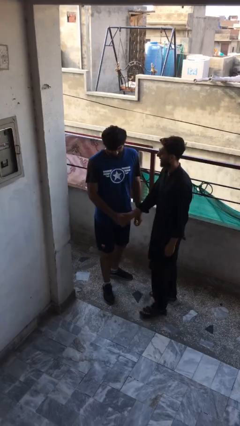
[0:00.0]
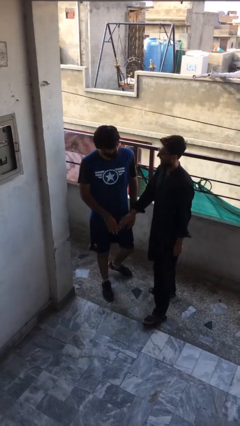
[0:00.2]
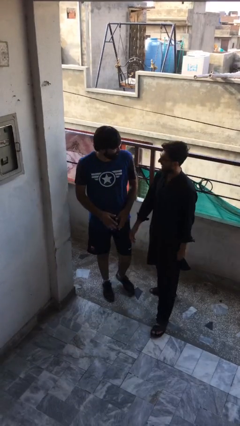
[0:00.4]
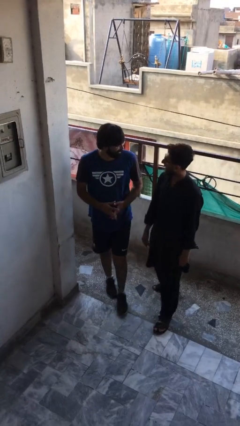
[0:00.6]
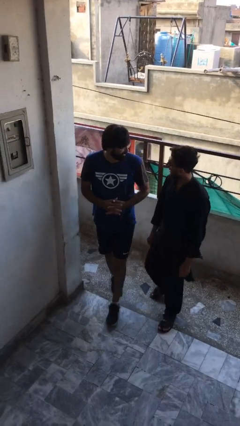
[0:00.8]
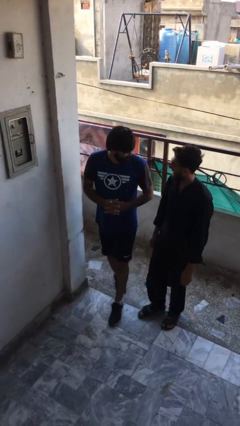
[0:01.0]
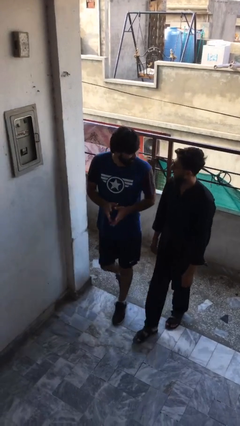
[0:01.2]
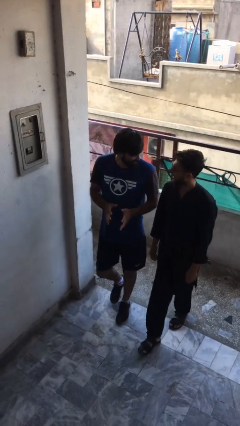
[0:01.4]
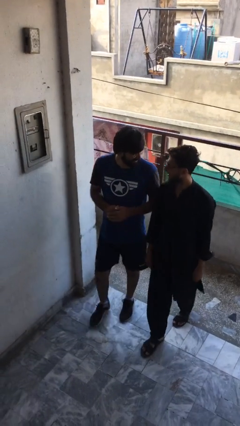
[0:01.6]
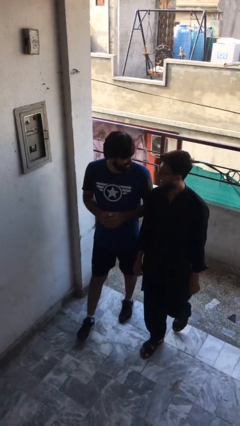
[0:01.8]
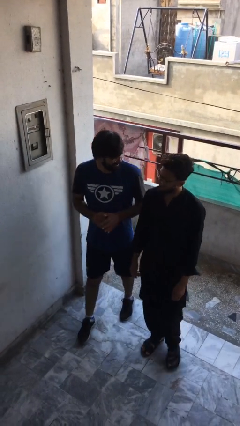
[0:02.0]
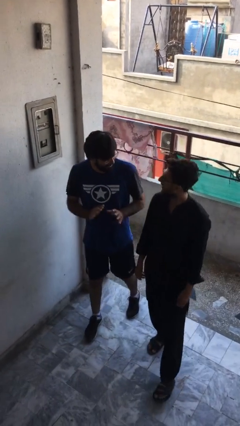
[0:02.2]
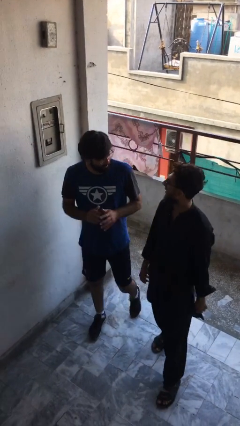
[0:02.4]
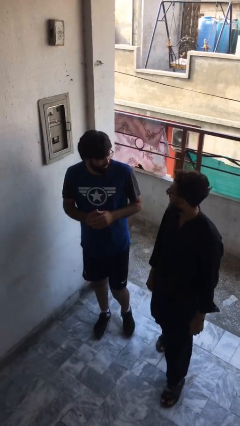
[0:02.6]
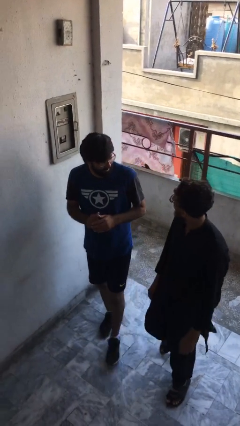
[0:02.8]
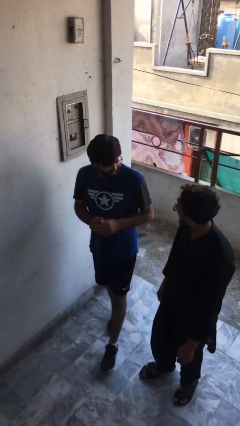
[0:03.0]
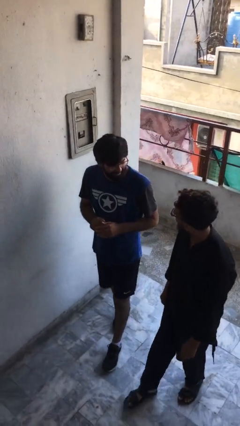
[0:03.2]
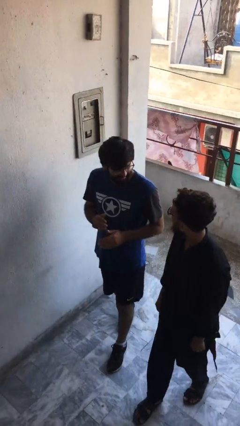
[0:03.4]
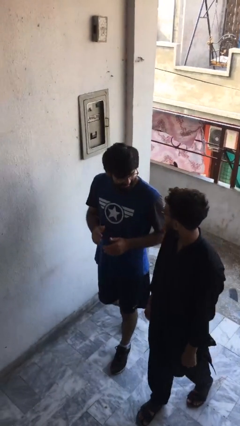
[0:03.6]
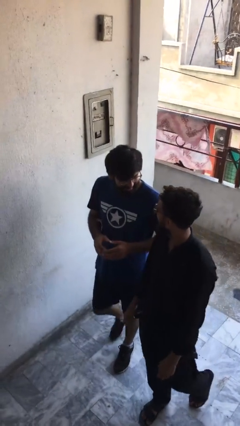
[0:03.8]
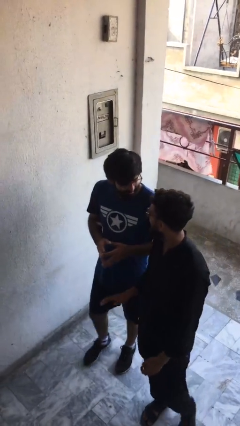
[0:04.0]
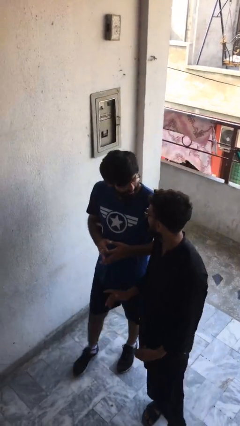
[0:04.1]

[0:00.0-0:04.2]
person talks to person

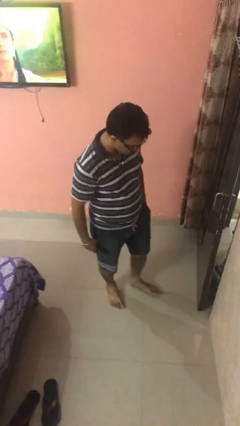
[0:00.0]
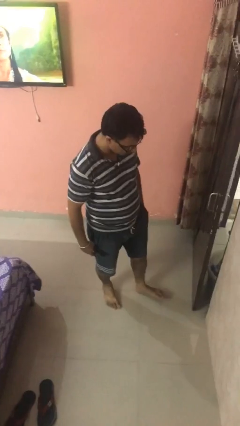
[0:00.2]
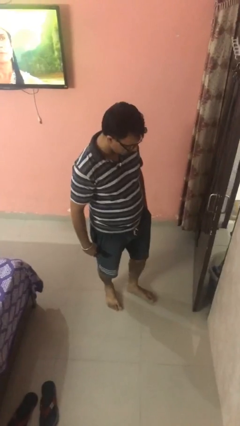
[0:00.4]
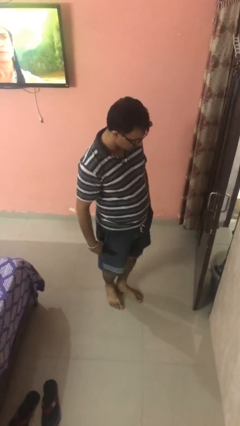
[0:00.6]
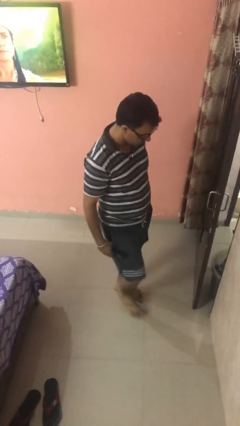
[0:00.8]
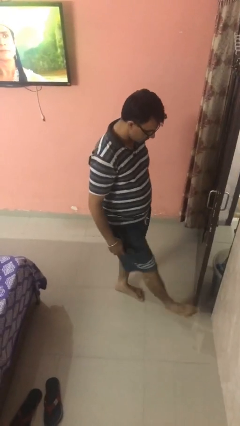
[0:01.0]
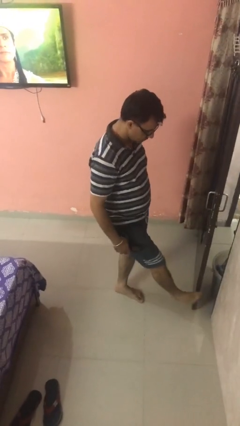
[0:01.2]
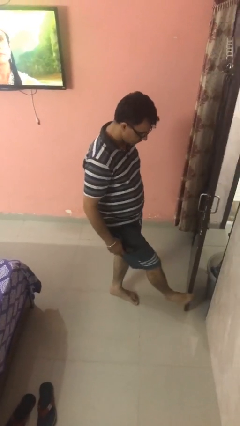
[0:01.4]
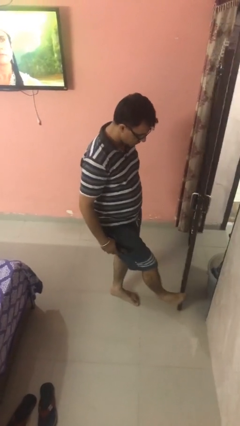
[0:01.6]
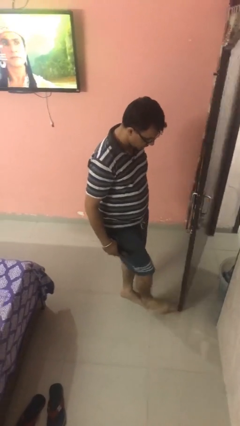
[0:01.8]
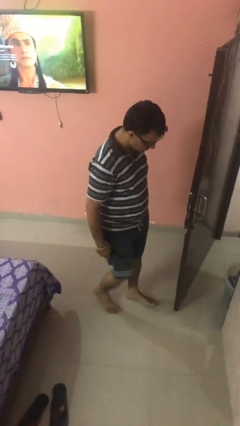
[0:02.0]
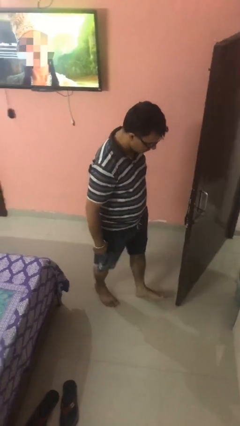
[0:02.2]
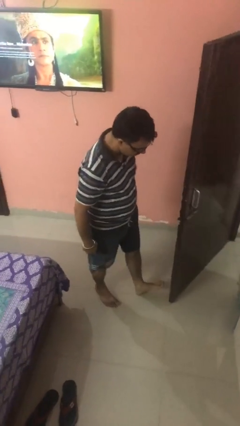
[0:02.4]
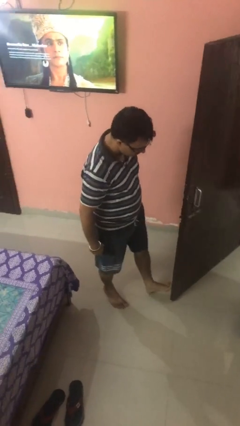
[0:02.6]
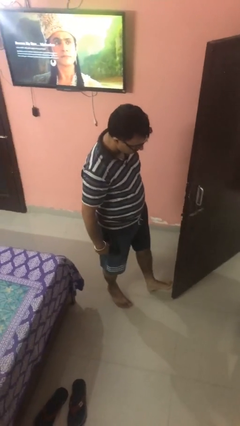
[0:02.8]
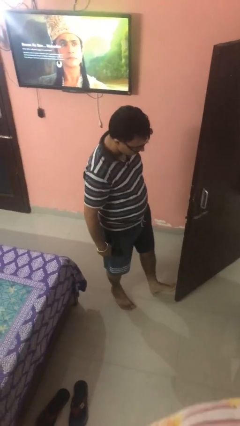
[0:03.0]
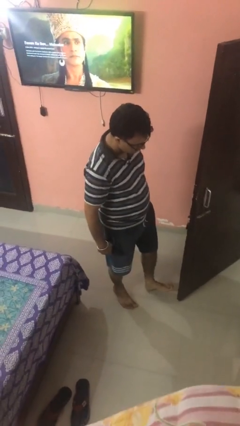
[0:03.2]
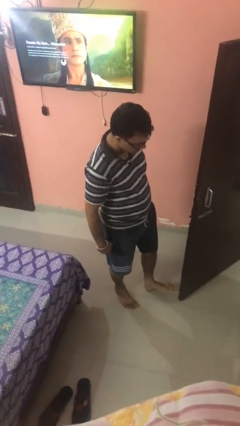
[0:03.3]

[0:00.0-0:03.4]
person opens facility door

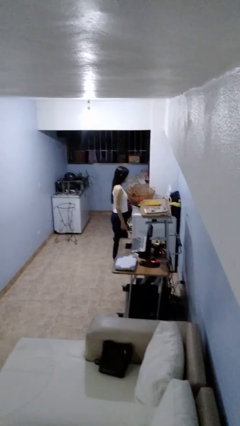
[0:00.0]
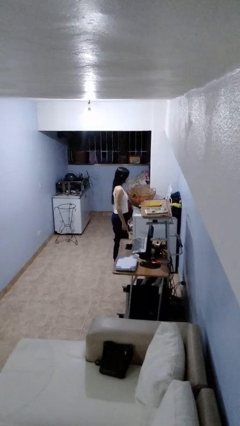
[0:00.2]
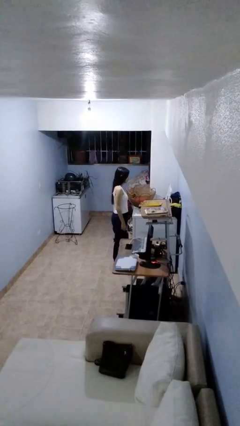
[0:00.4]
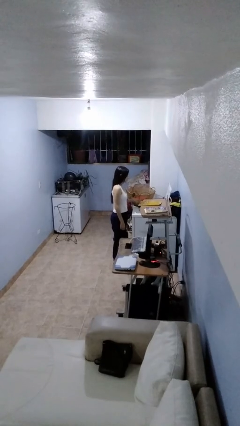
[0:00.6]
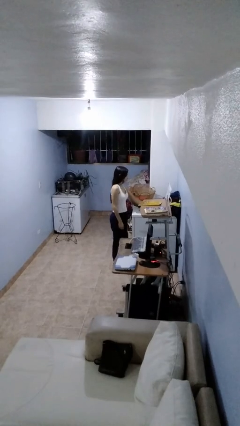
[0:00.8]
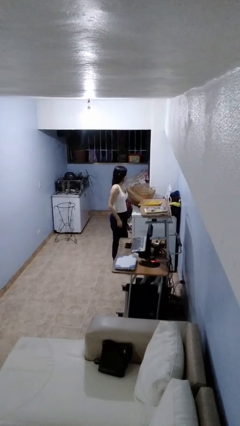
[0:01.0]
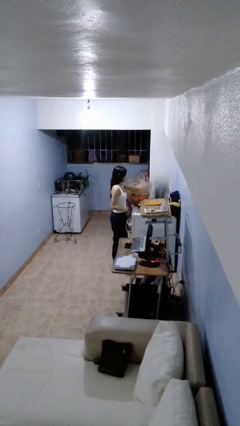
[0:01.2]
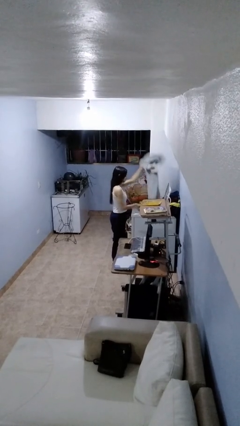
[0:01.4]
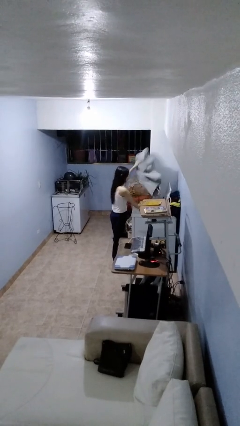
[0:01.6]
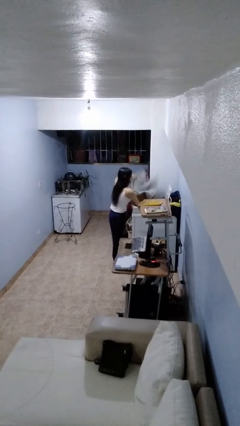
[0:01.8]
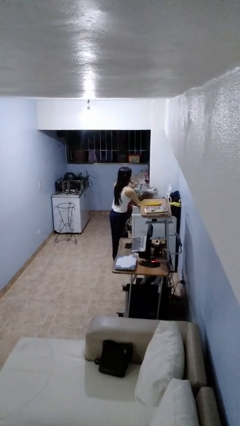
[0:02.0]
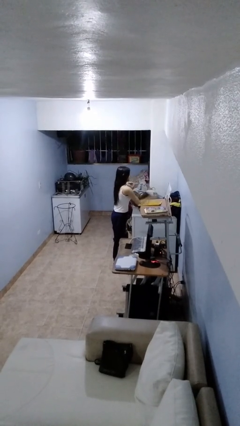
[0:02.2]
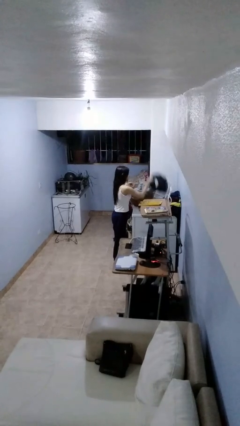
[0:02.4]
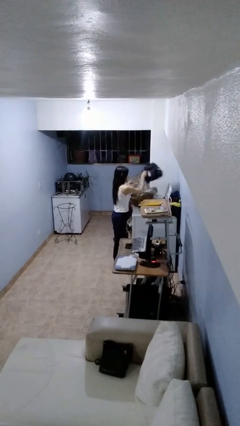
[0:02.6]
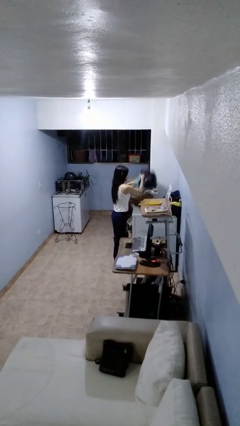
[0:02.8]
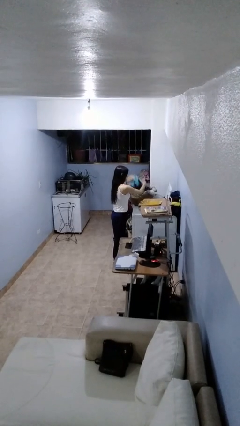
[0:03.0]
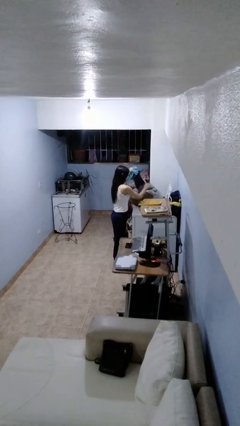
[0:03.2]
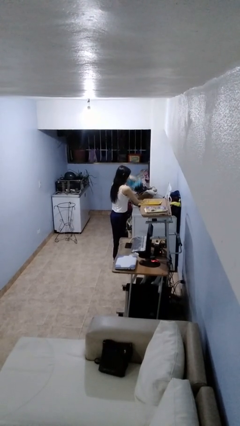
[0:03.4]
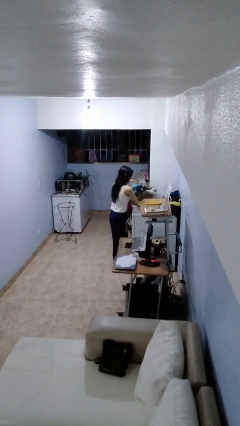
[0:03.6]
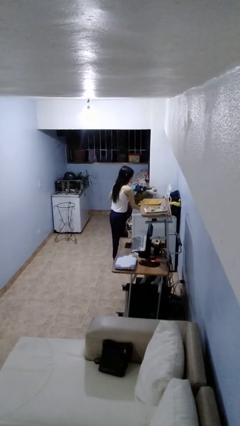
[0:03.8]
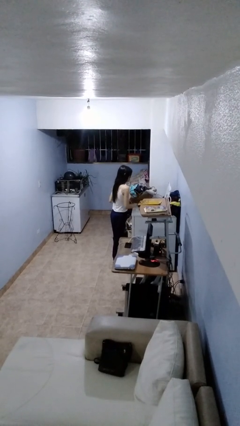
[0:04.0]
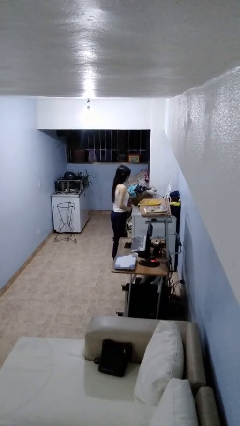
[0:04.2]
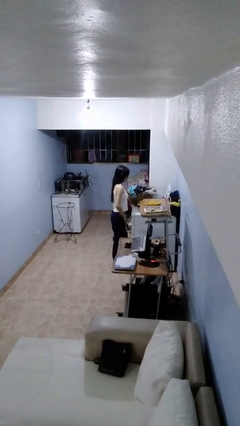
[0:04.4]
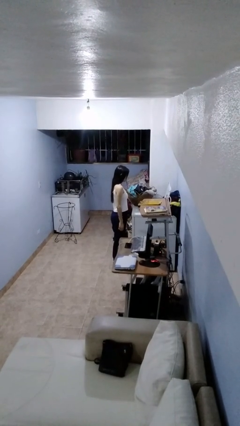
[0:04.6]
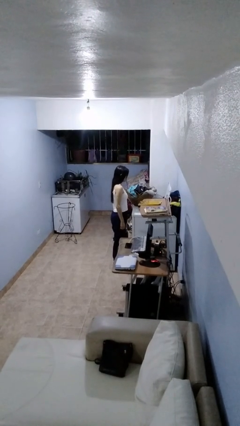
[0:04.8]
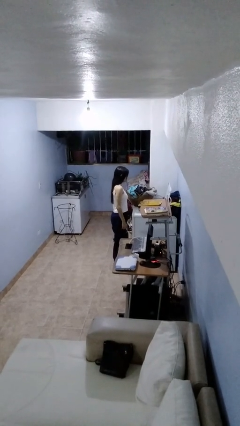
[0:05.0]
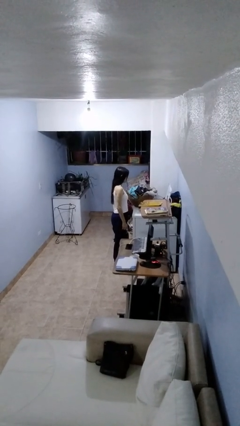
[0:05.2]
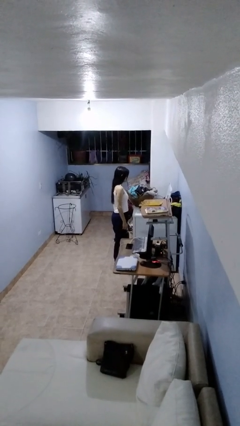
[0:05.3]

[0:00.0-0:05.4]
person unloads clotheswasher

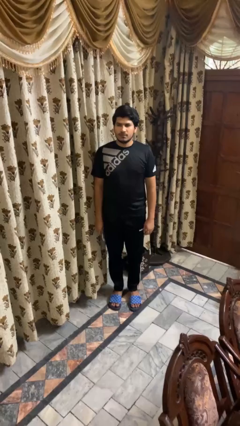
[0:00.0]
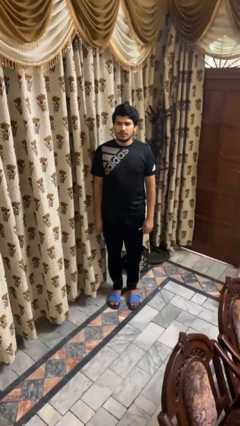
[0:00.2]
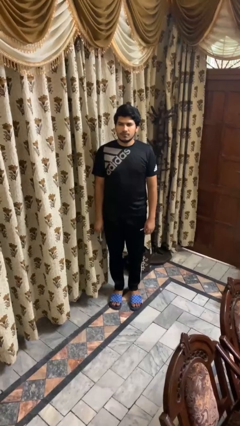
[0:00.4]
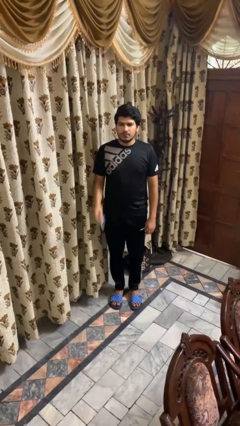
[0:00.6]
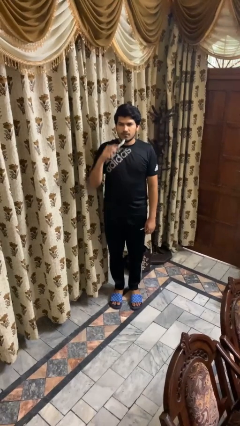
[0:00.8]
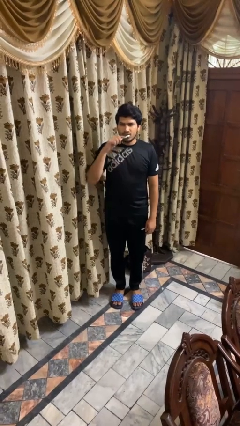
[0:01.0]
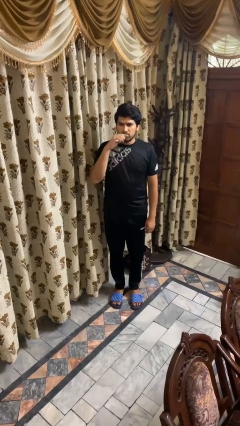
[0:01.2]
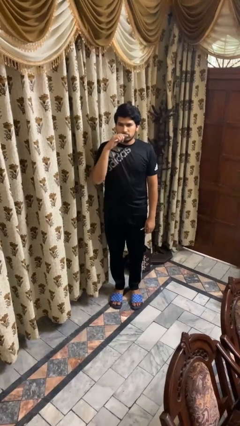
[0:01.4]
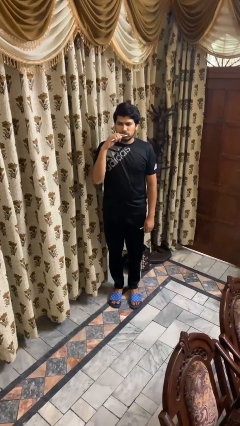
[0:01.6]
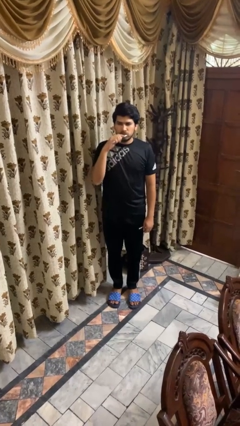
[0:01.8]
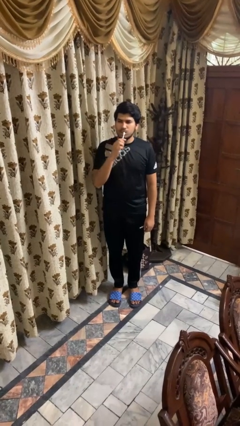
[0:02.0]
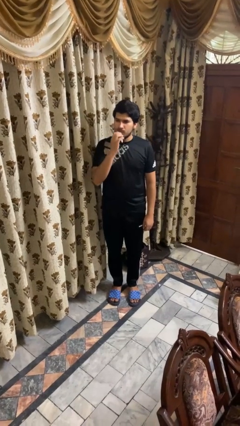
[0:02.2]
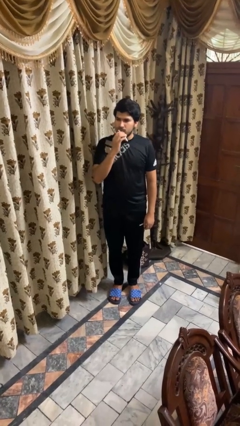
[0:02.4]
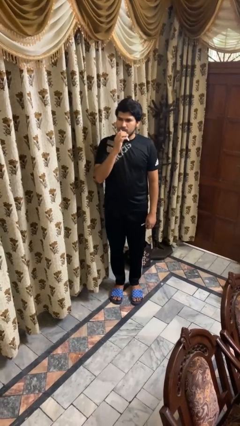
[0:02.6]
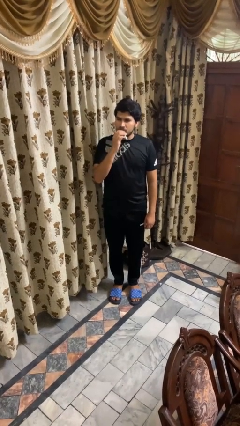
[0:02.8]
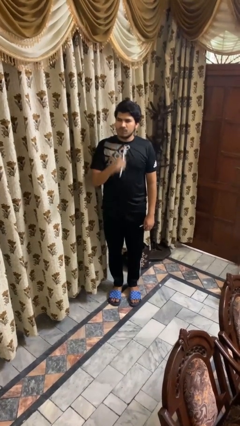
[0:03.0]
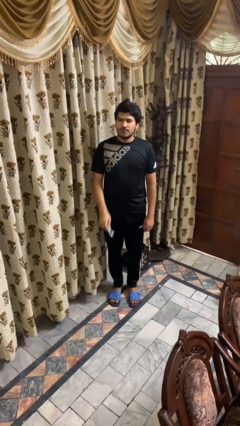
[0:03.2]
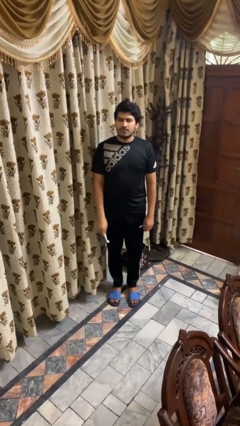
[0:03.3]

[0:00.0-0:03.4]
person brushes teeth

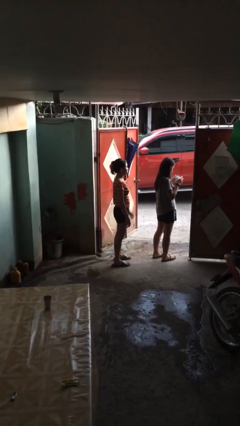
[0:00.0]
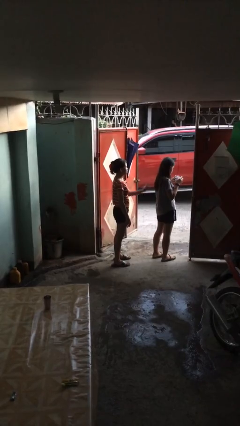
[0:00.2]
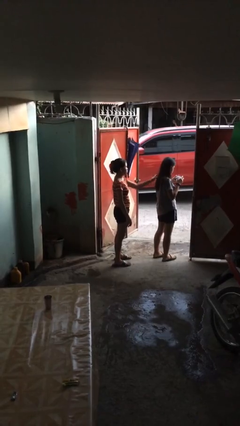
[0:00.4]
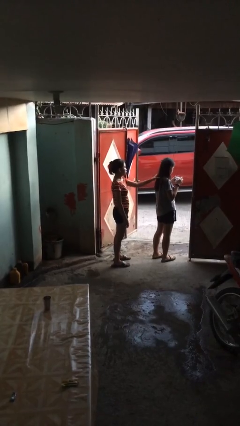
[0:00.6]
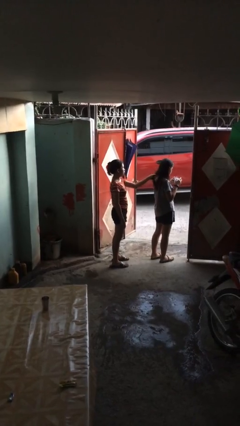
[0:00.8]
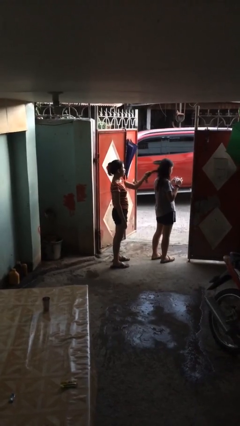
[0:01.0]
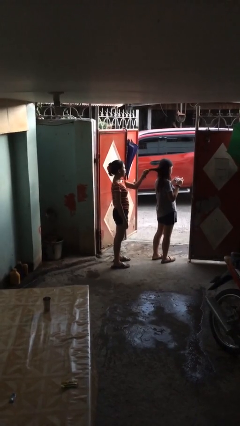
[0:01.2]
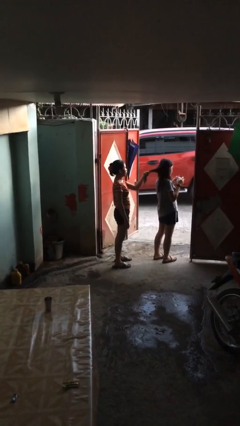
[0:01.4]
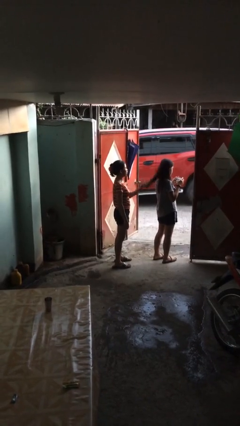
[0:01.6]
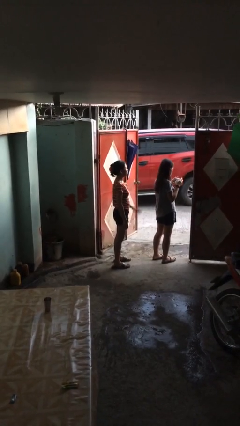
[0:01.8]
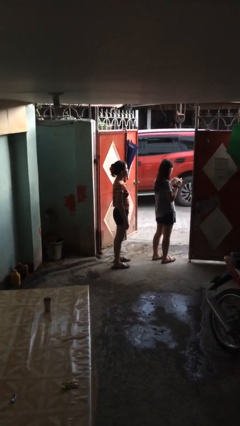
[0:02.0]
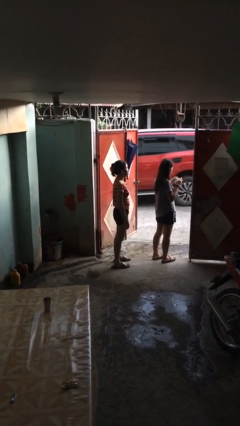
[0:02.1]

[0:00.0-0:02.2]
person grabs person by hair
